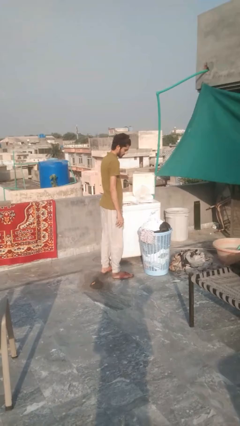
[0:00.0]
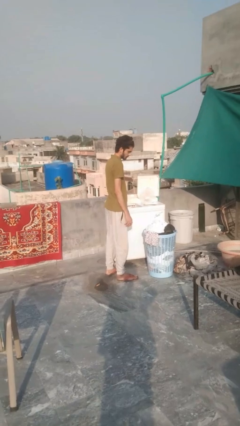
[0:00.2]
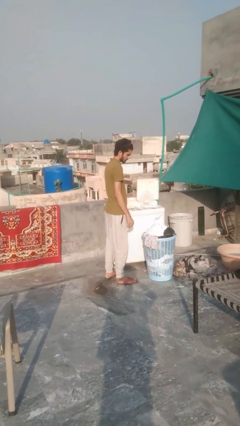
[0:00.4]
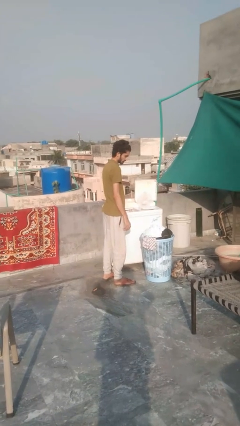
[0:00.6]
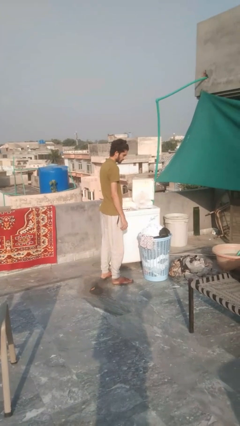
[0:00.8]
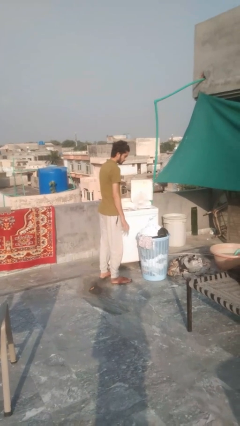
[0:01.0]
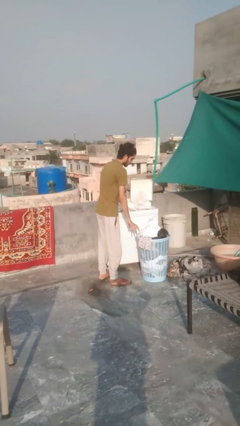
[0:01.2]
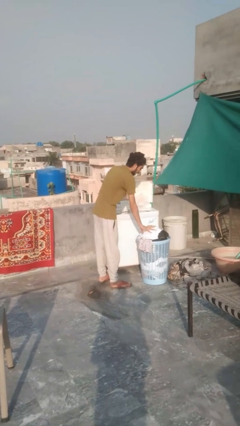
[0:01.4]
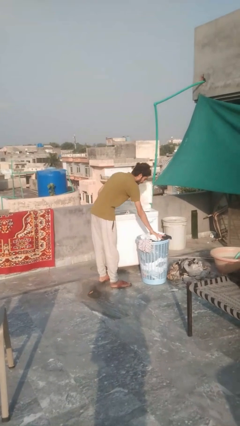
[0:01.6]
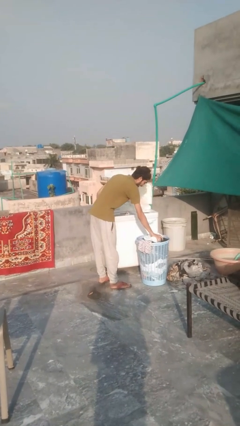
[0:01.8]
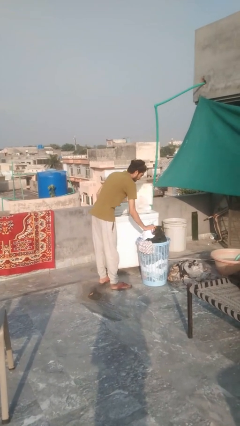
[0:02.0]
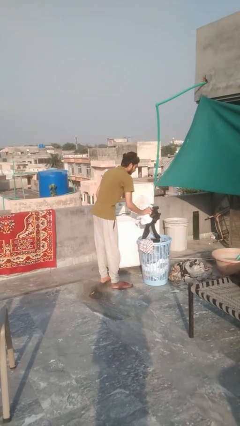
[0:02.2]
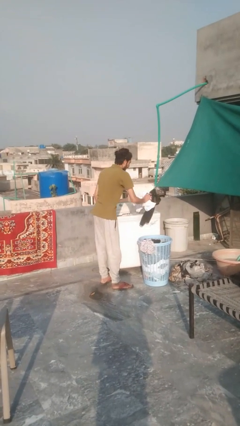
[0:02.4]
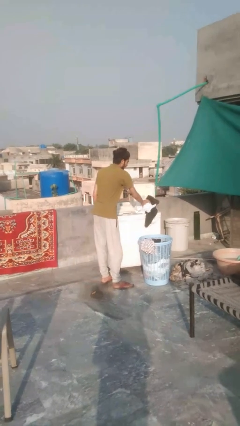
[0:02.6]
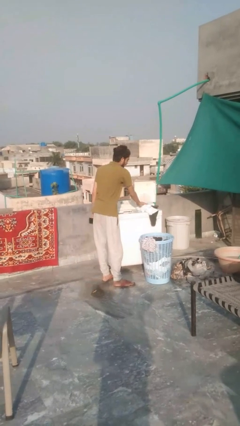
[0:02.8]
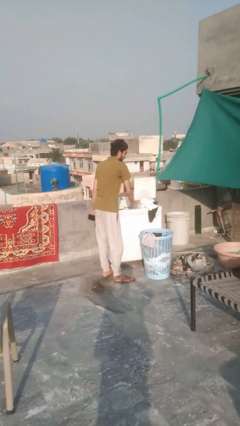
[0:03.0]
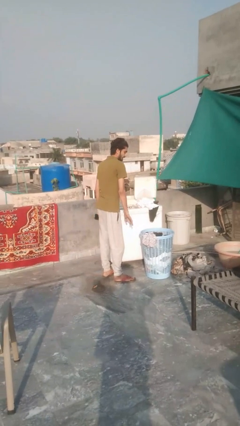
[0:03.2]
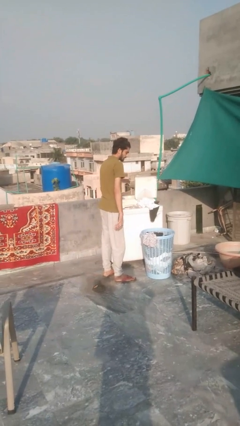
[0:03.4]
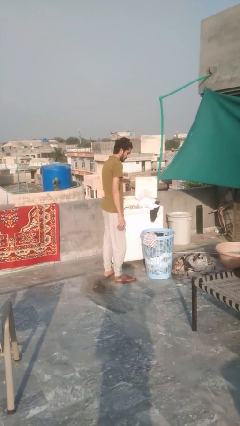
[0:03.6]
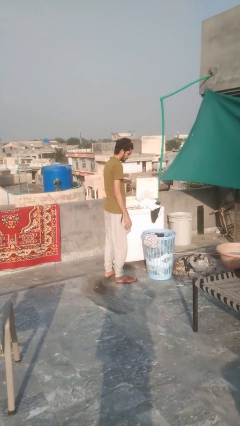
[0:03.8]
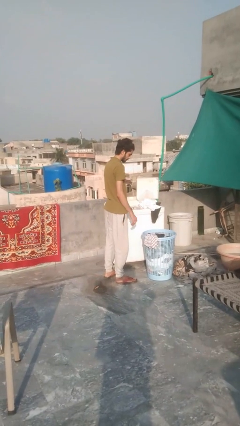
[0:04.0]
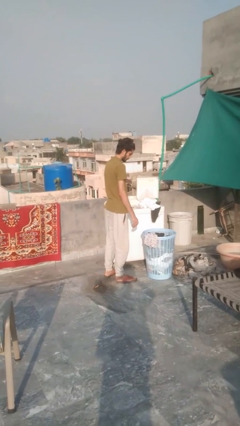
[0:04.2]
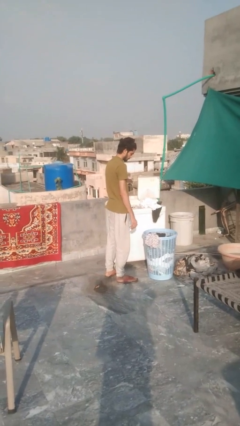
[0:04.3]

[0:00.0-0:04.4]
person loads clotheswasher

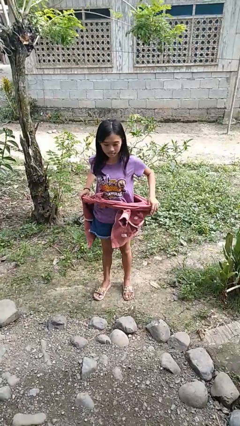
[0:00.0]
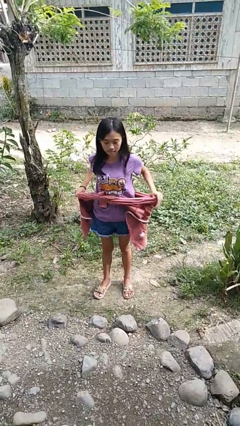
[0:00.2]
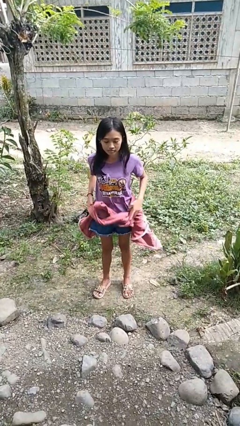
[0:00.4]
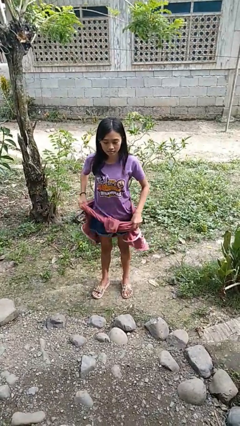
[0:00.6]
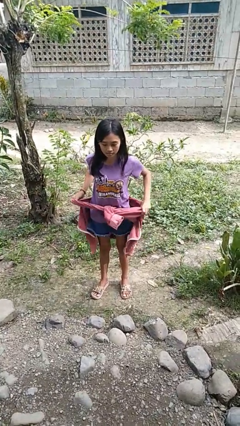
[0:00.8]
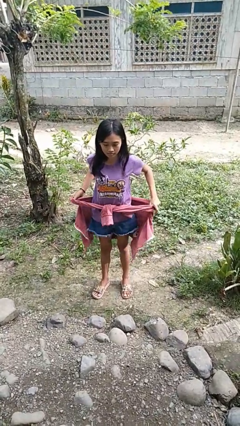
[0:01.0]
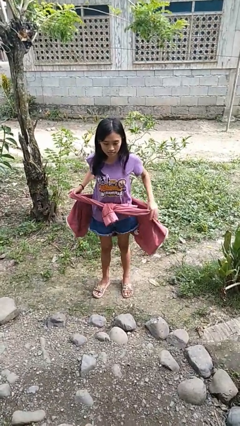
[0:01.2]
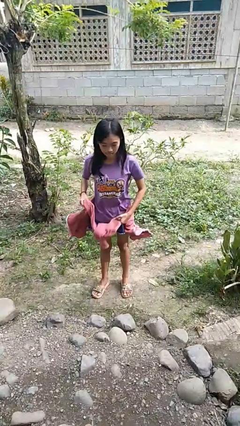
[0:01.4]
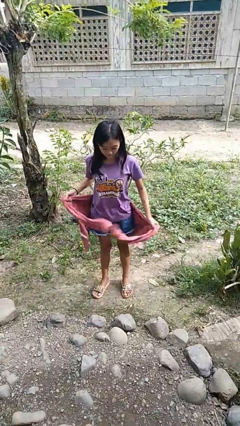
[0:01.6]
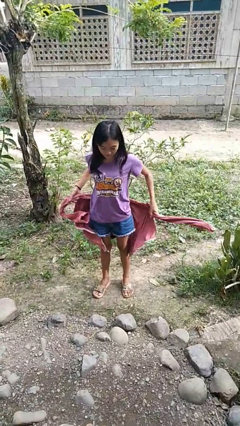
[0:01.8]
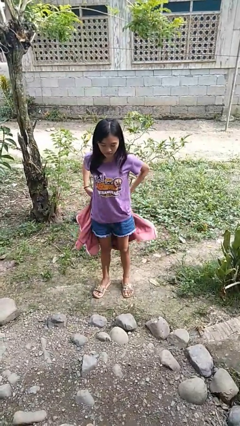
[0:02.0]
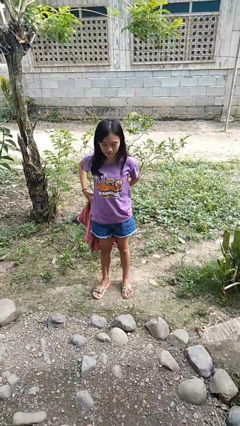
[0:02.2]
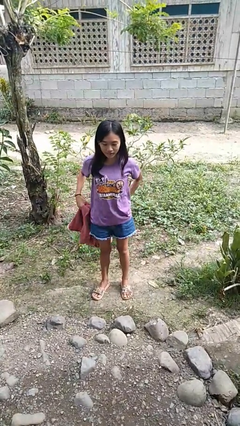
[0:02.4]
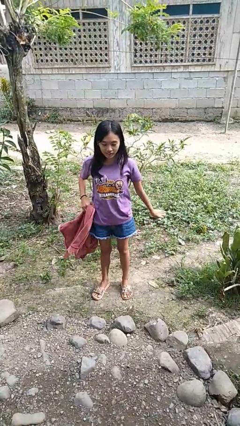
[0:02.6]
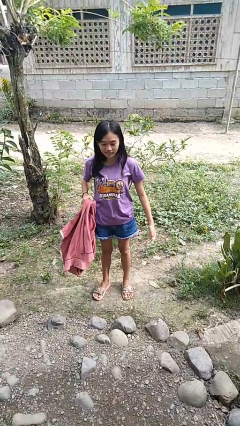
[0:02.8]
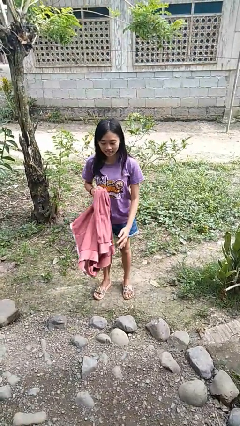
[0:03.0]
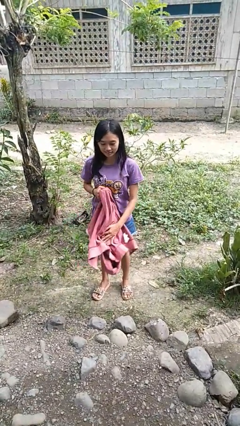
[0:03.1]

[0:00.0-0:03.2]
person unties jacket around waist

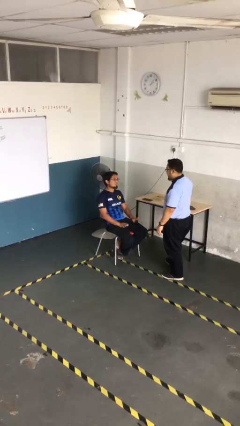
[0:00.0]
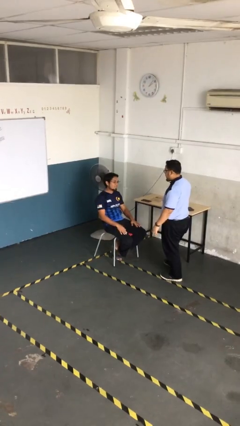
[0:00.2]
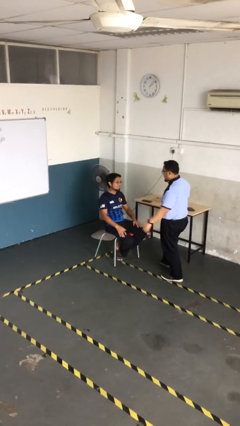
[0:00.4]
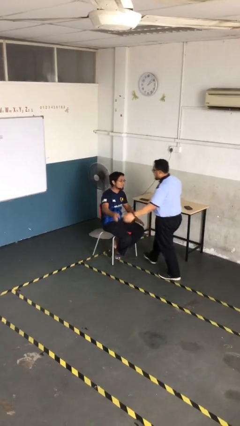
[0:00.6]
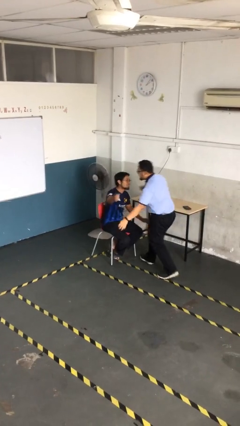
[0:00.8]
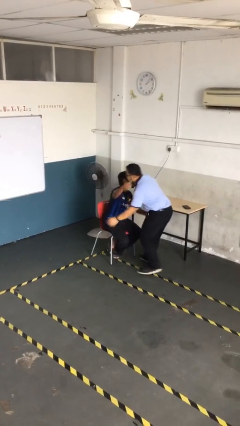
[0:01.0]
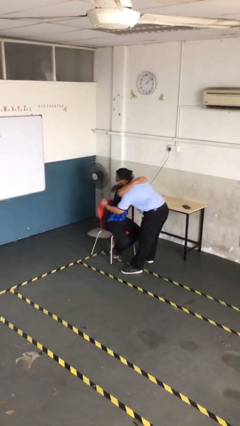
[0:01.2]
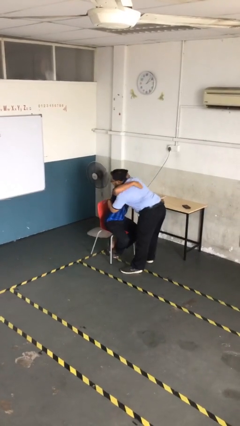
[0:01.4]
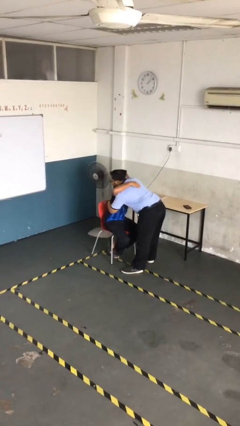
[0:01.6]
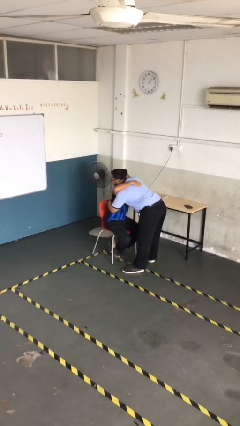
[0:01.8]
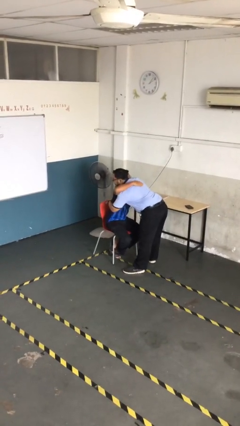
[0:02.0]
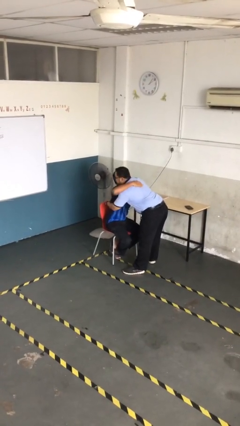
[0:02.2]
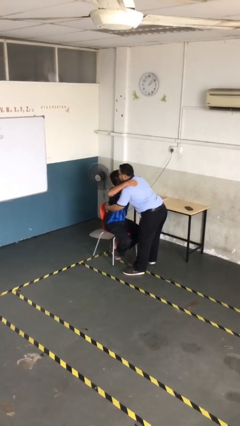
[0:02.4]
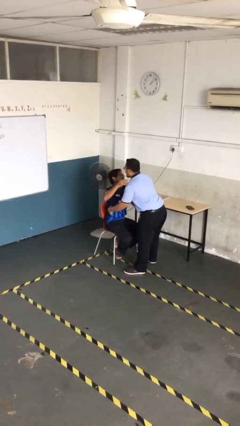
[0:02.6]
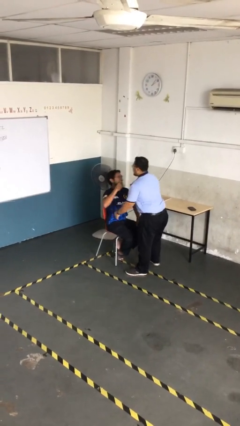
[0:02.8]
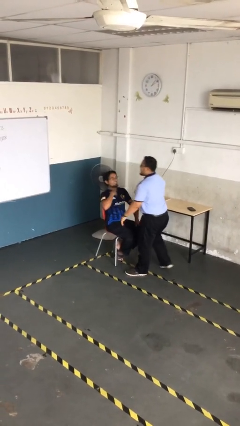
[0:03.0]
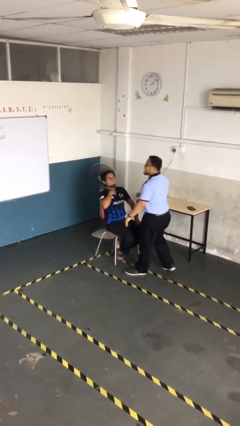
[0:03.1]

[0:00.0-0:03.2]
person embraces person

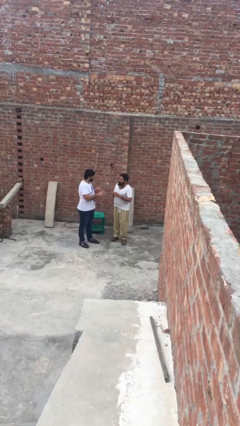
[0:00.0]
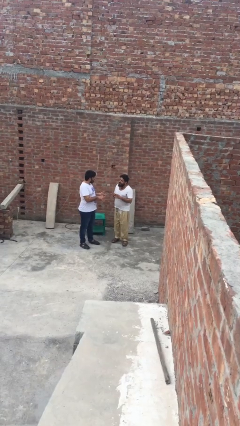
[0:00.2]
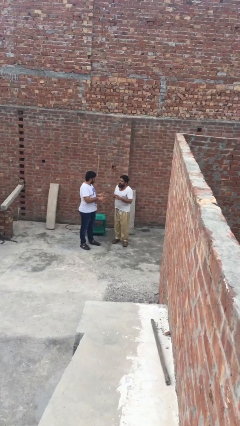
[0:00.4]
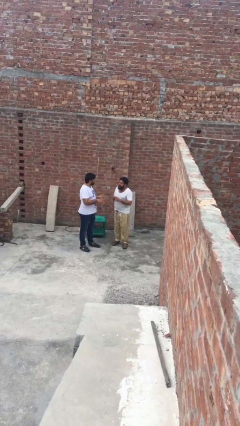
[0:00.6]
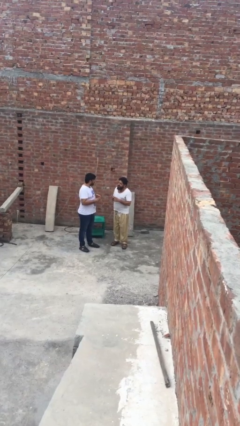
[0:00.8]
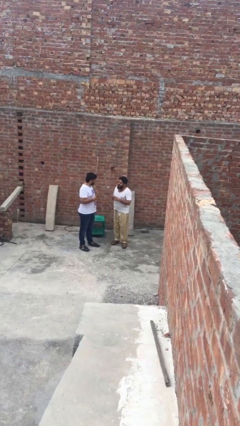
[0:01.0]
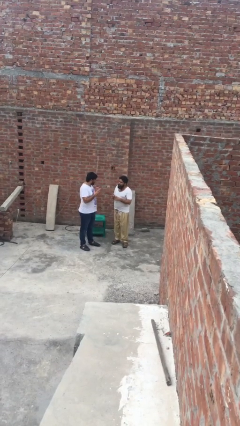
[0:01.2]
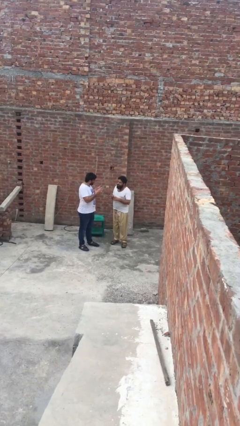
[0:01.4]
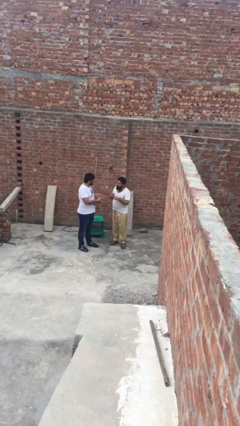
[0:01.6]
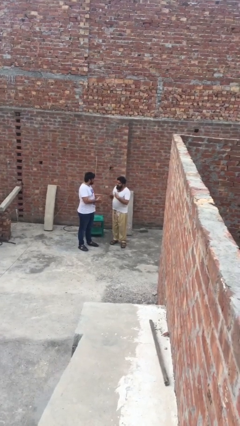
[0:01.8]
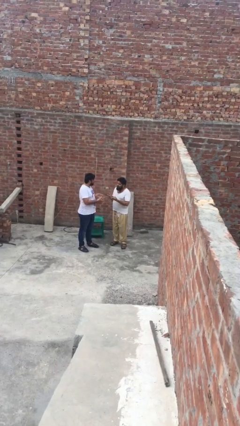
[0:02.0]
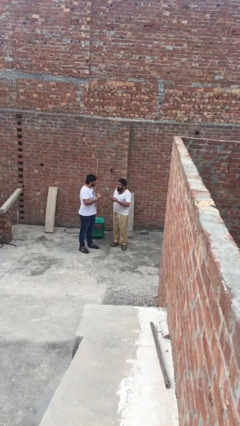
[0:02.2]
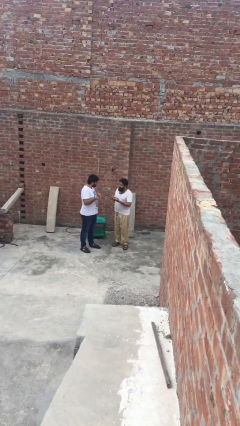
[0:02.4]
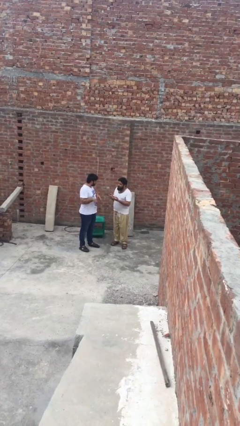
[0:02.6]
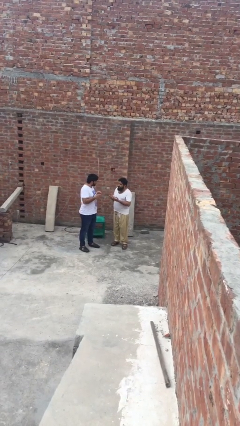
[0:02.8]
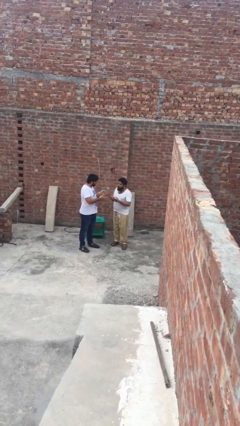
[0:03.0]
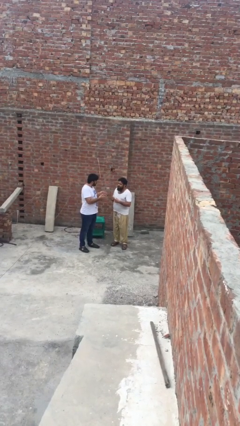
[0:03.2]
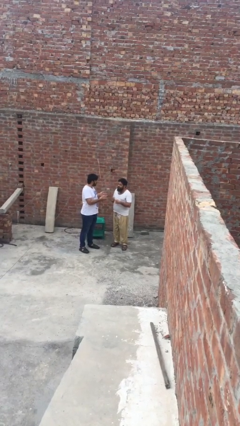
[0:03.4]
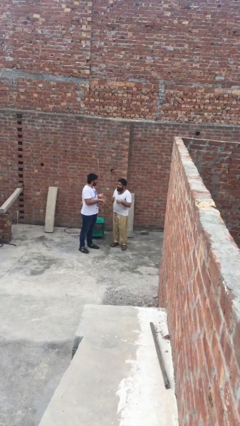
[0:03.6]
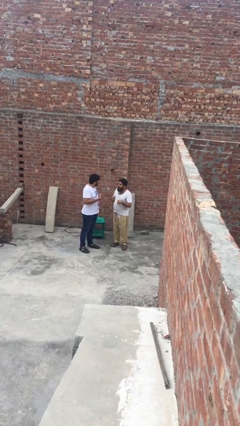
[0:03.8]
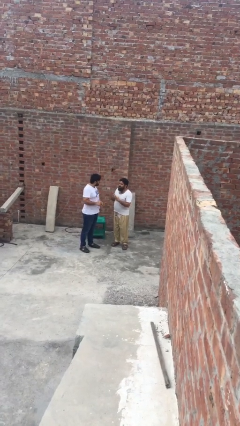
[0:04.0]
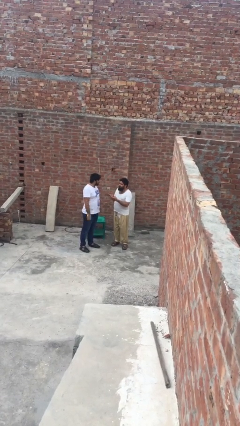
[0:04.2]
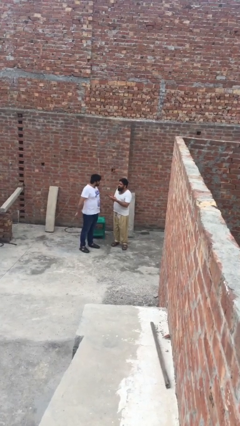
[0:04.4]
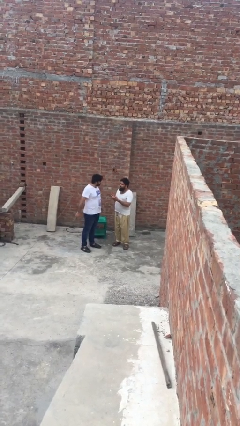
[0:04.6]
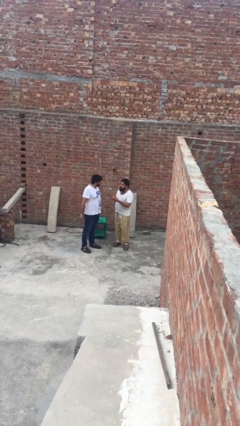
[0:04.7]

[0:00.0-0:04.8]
person talks to person

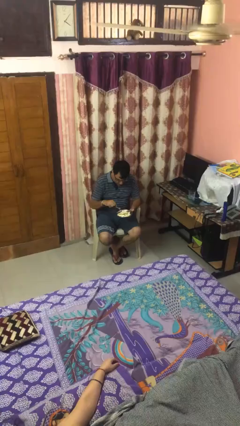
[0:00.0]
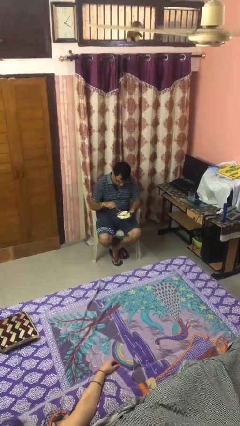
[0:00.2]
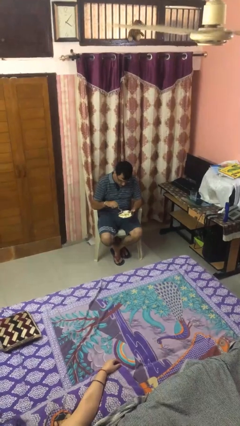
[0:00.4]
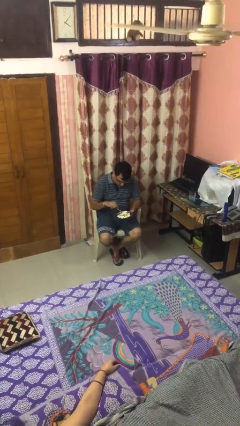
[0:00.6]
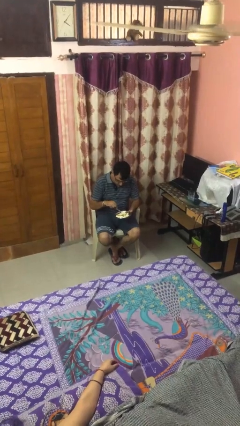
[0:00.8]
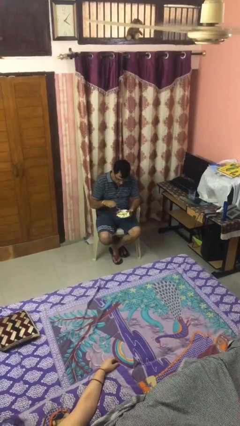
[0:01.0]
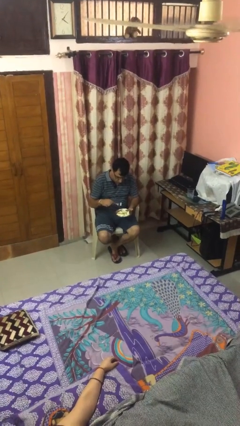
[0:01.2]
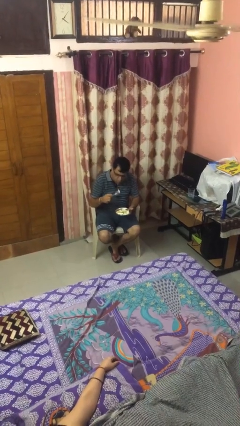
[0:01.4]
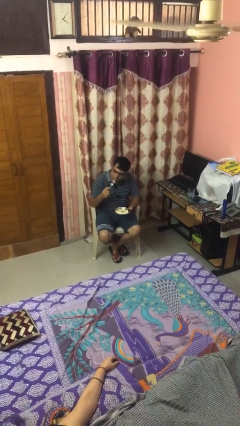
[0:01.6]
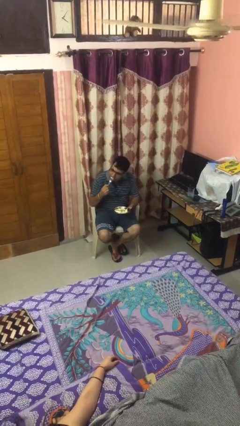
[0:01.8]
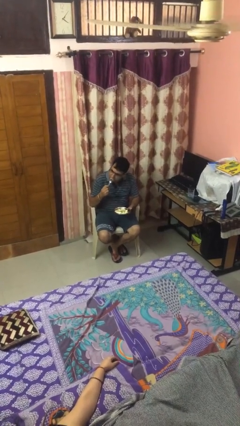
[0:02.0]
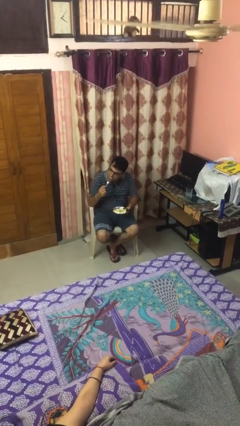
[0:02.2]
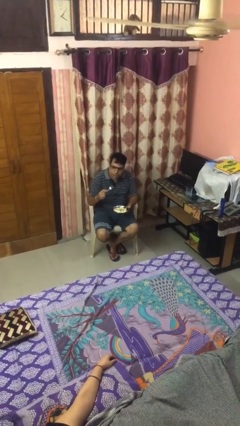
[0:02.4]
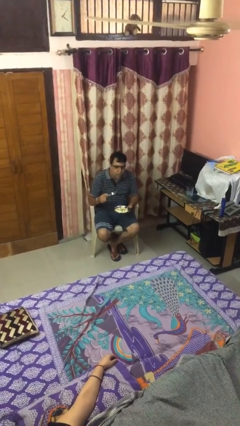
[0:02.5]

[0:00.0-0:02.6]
person eats with utensil
